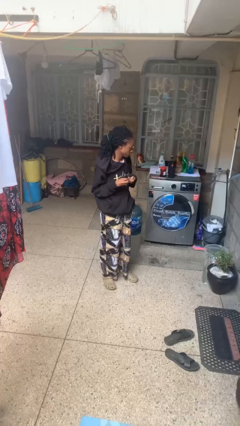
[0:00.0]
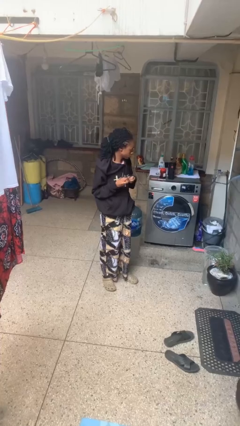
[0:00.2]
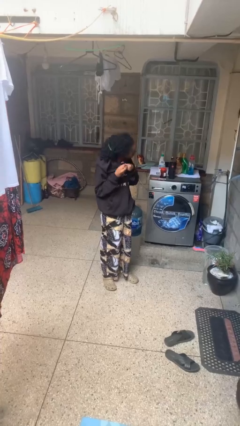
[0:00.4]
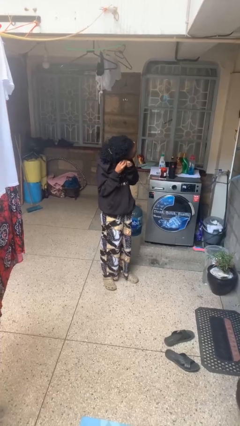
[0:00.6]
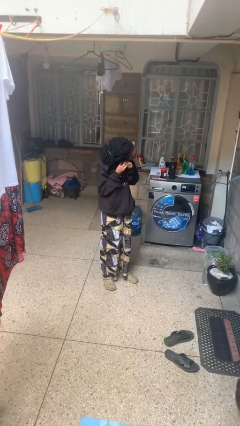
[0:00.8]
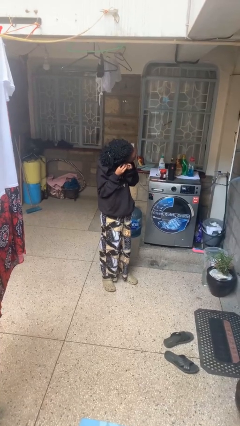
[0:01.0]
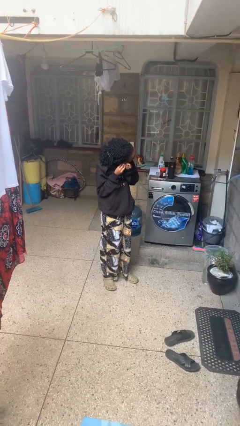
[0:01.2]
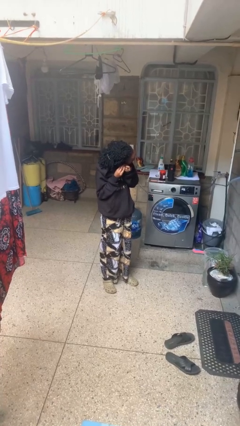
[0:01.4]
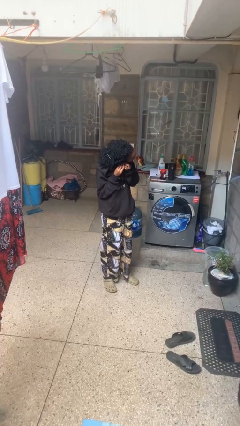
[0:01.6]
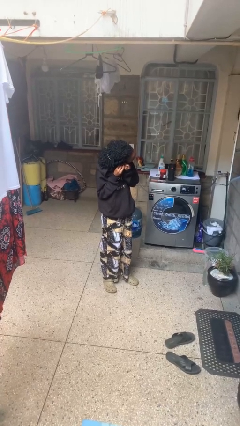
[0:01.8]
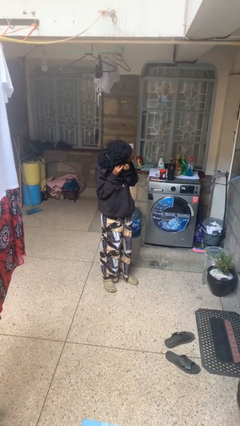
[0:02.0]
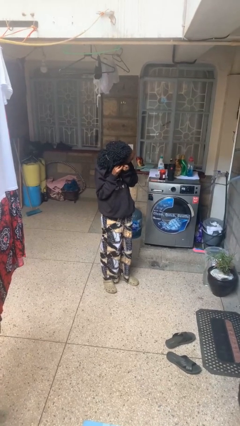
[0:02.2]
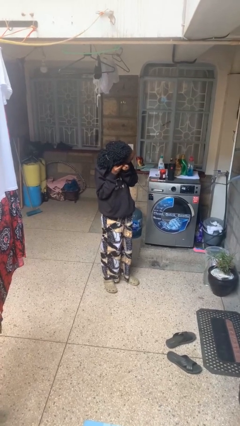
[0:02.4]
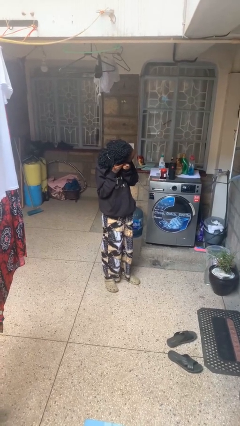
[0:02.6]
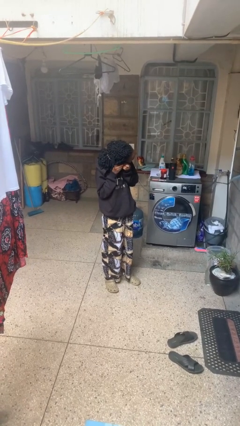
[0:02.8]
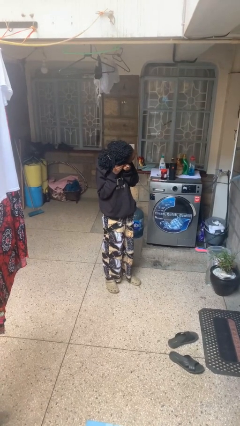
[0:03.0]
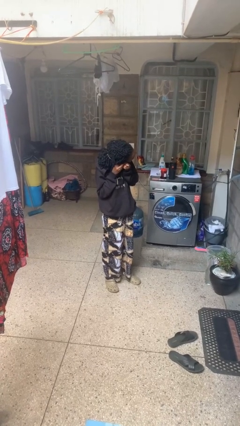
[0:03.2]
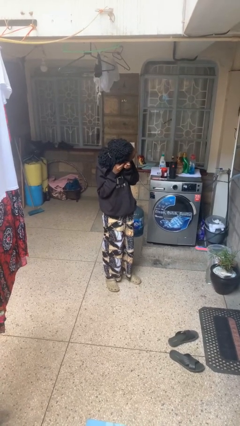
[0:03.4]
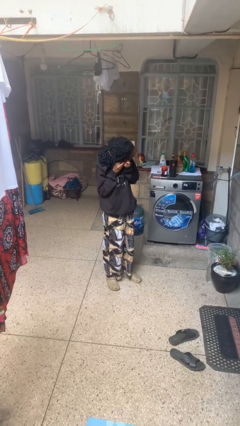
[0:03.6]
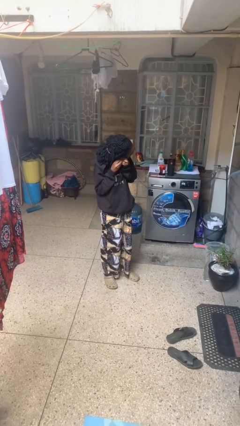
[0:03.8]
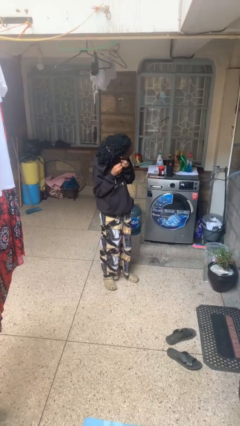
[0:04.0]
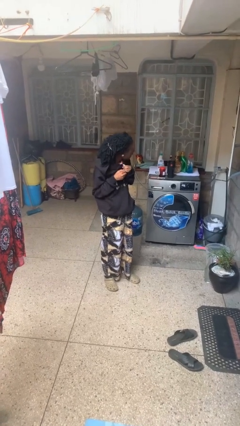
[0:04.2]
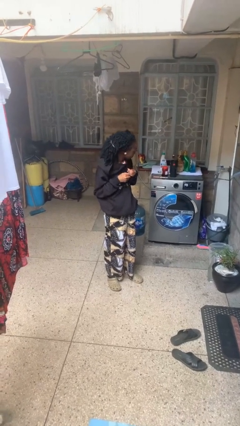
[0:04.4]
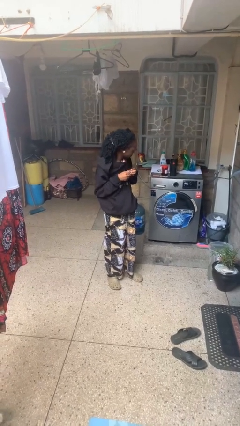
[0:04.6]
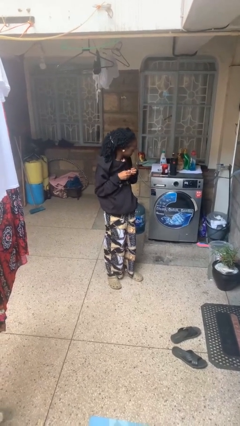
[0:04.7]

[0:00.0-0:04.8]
person puts on earrings

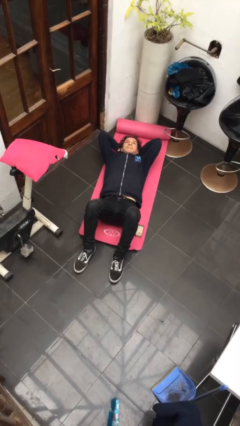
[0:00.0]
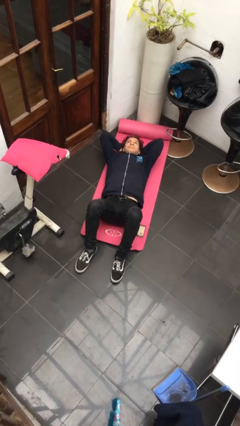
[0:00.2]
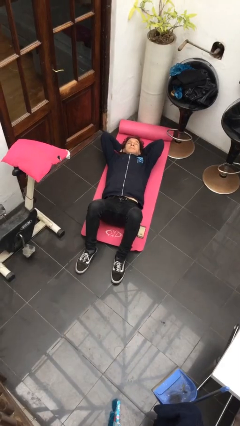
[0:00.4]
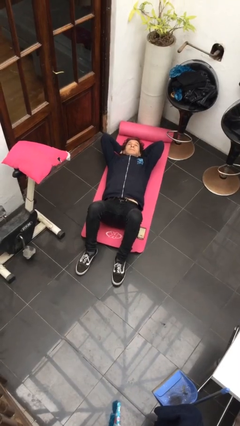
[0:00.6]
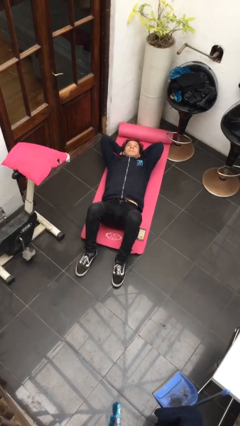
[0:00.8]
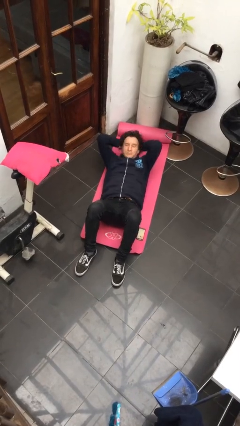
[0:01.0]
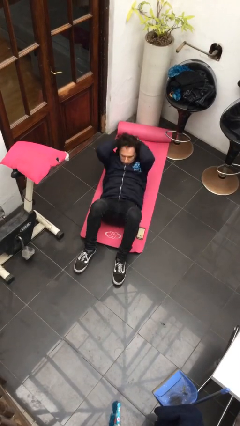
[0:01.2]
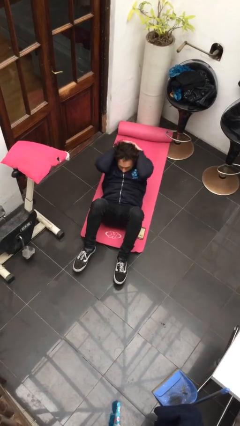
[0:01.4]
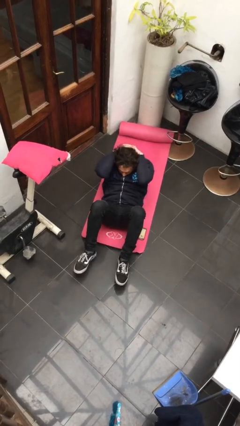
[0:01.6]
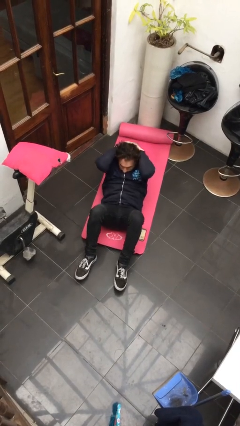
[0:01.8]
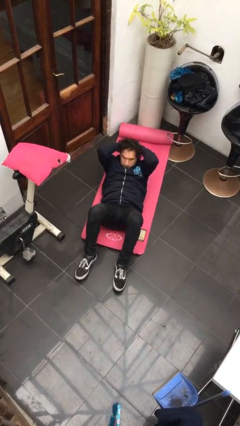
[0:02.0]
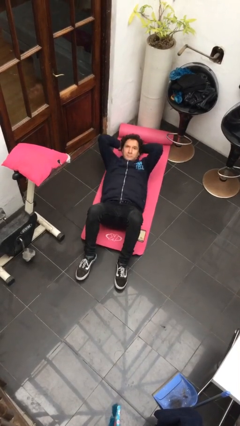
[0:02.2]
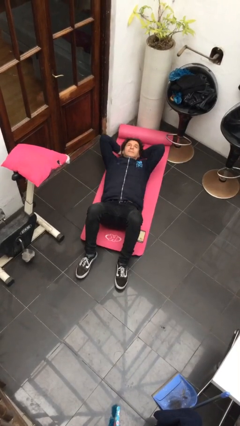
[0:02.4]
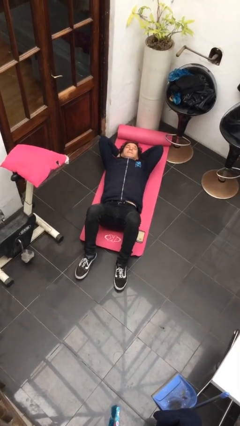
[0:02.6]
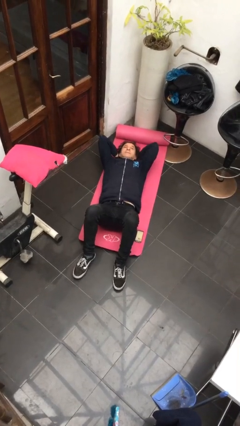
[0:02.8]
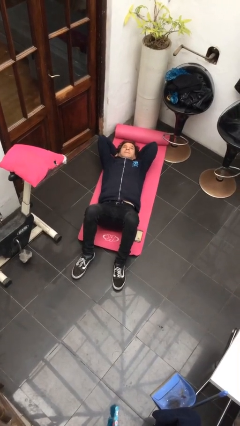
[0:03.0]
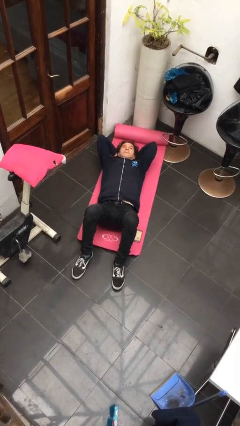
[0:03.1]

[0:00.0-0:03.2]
person exercises with situp

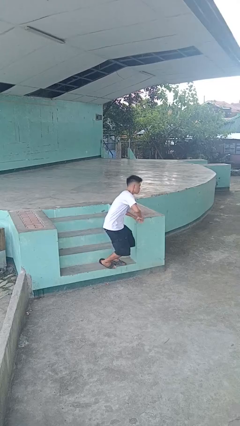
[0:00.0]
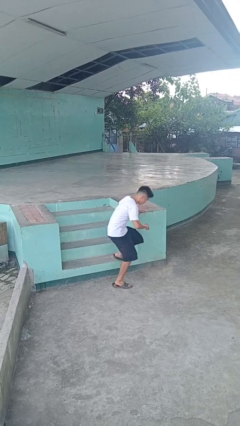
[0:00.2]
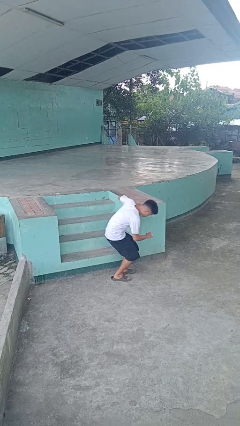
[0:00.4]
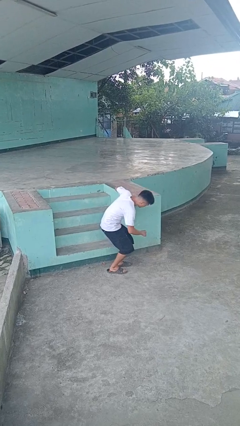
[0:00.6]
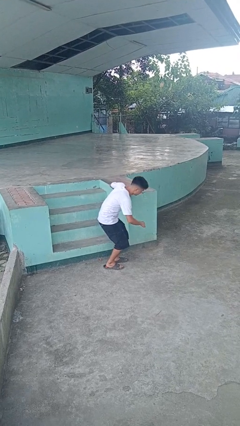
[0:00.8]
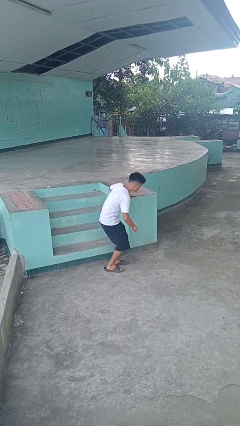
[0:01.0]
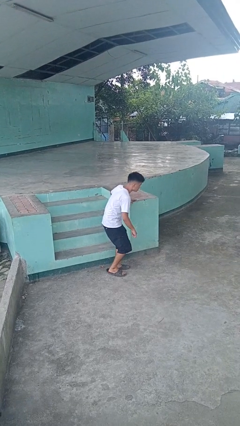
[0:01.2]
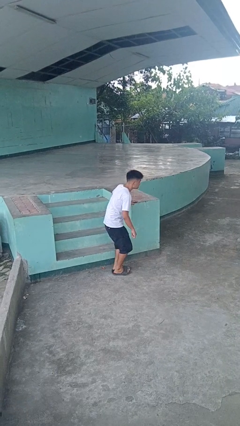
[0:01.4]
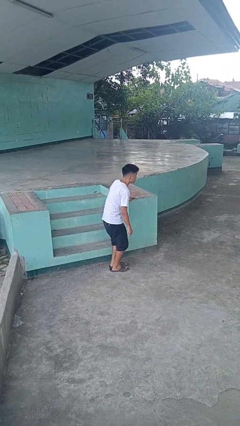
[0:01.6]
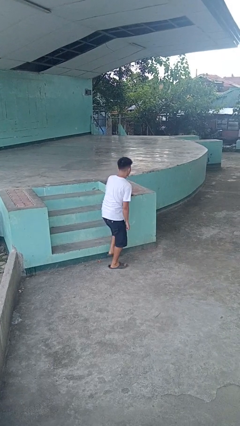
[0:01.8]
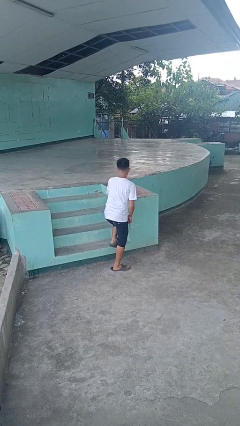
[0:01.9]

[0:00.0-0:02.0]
person trips on stair

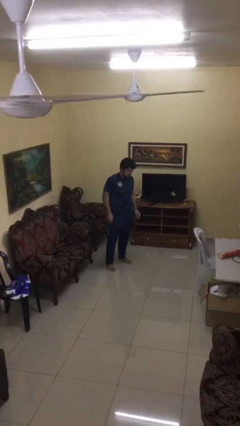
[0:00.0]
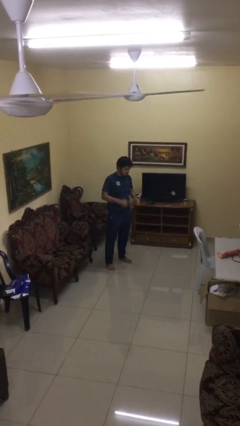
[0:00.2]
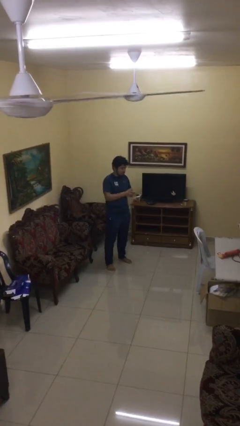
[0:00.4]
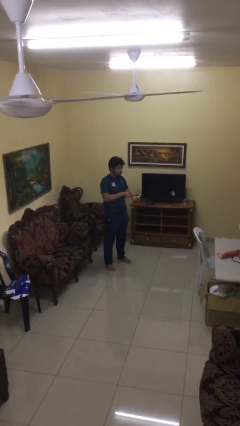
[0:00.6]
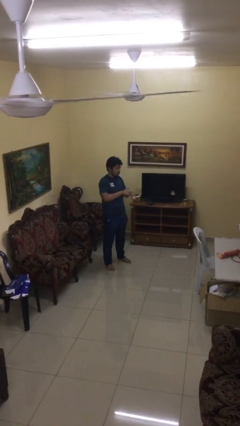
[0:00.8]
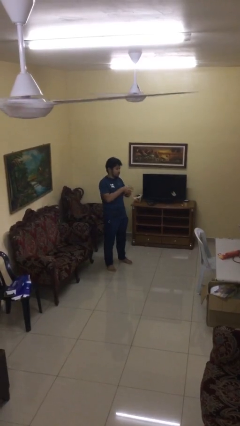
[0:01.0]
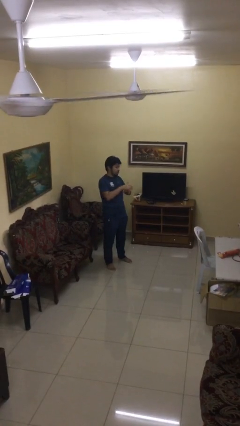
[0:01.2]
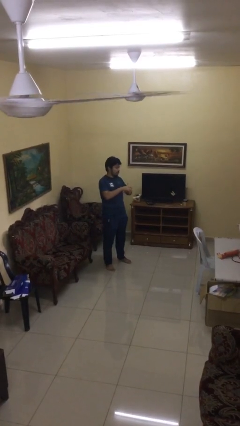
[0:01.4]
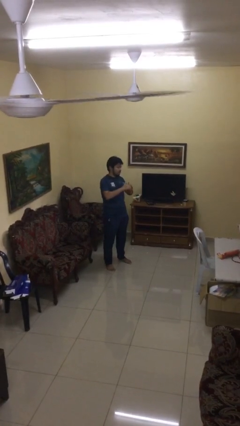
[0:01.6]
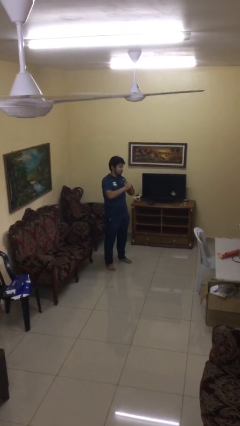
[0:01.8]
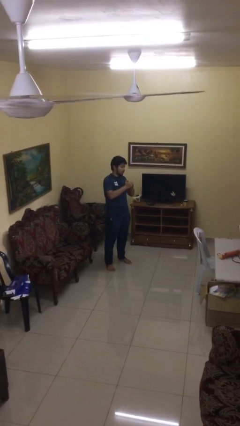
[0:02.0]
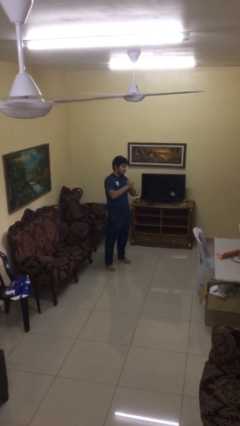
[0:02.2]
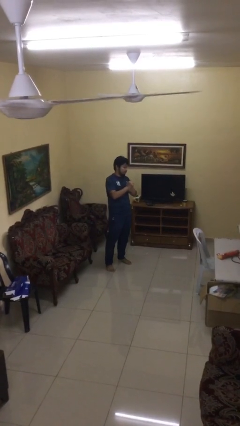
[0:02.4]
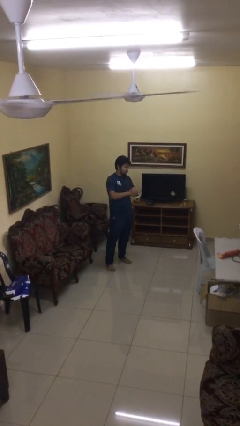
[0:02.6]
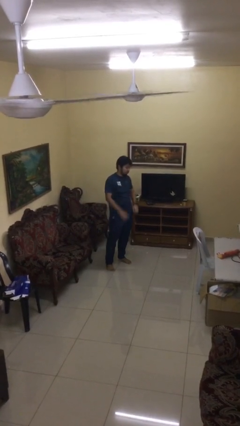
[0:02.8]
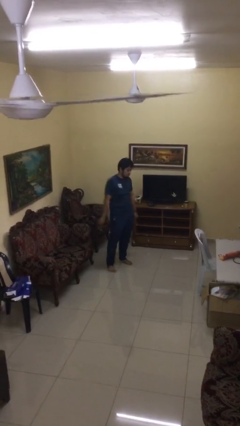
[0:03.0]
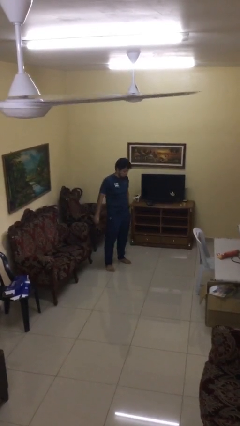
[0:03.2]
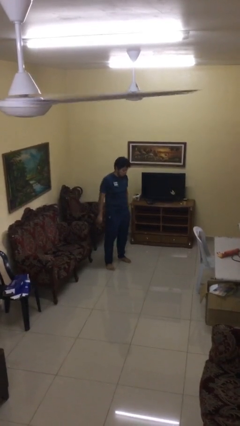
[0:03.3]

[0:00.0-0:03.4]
person cracks knuckles

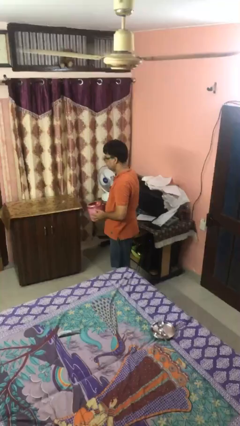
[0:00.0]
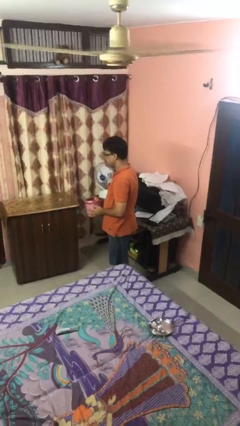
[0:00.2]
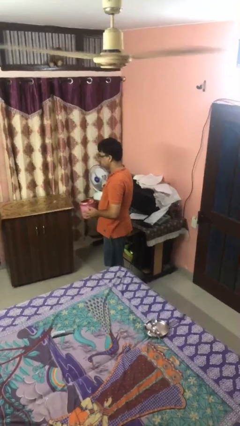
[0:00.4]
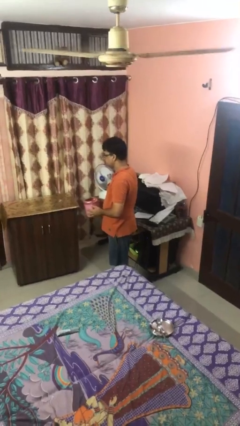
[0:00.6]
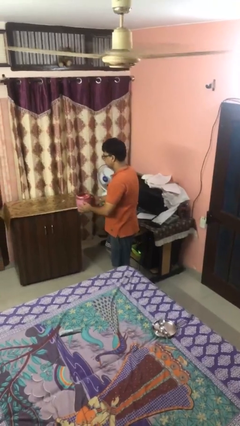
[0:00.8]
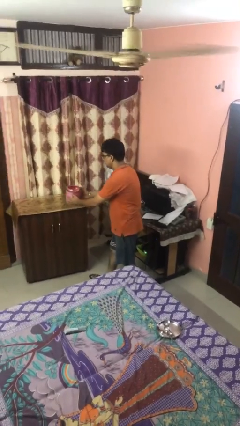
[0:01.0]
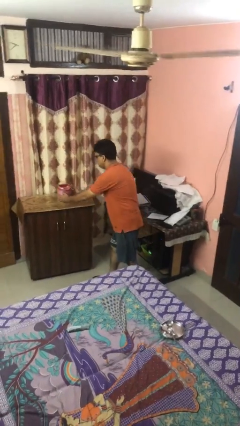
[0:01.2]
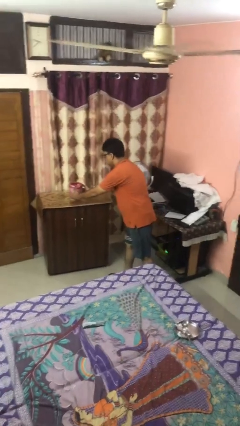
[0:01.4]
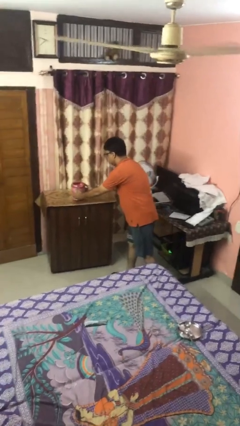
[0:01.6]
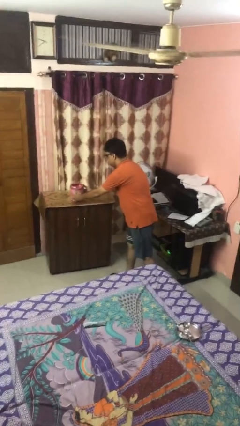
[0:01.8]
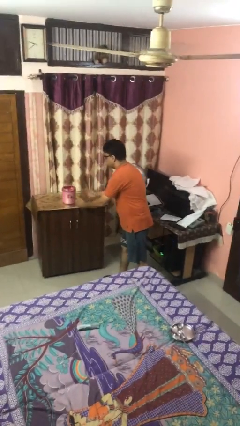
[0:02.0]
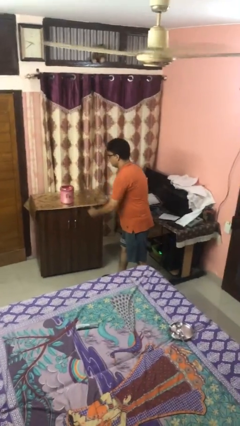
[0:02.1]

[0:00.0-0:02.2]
person puts down object on countertop

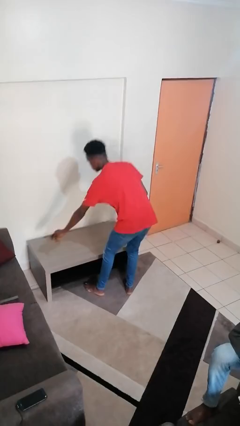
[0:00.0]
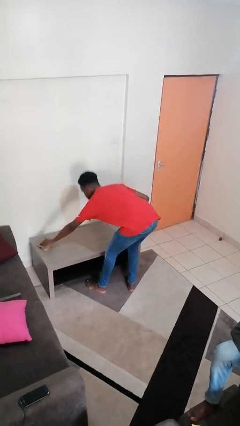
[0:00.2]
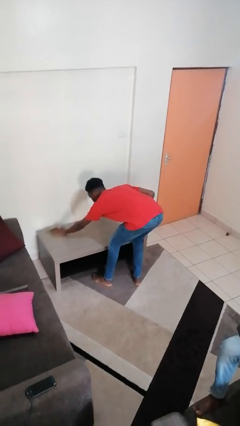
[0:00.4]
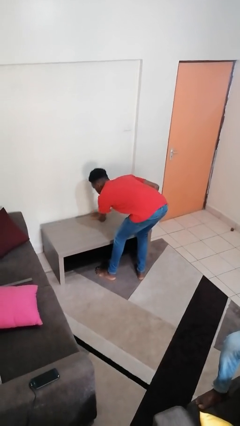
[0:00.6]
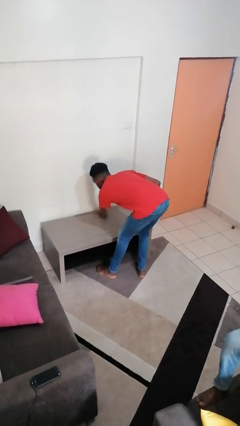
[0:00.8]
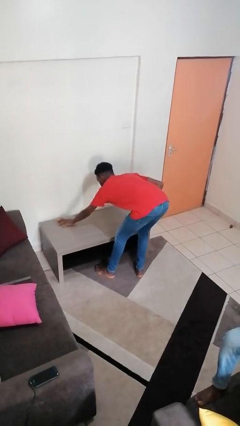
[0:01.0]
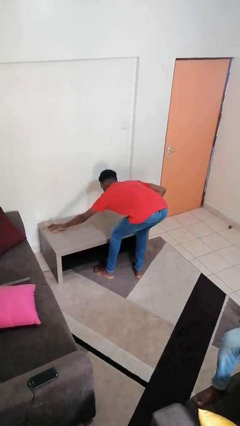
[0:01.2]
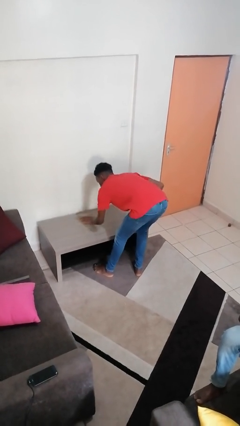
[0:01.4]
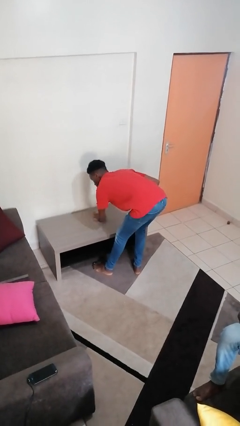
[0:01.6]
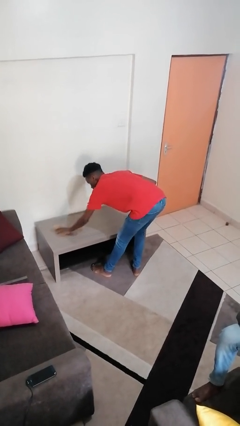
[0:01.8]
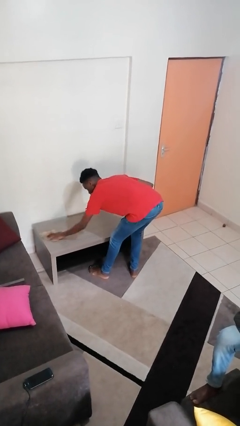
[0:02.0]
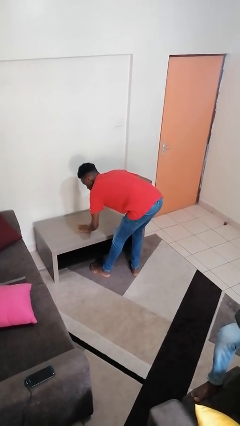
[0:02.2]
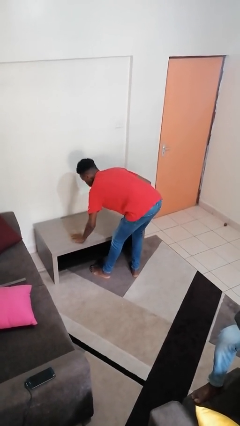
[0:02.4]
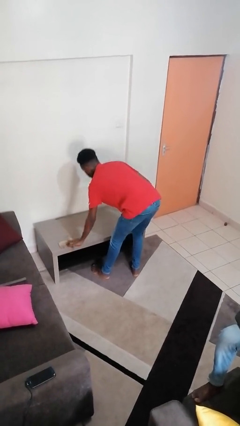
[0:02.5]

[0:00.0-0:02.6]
person cleans table with rag
